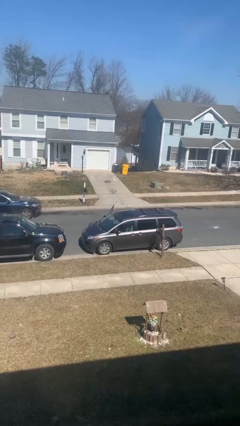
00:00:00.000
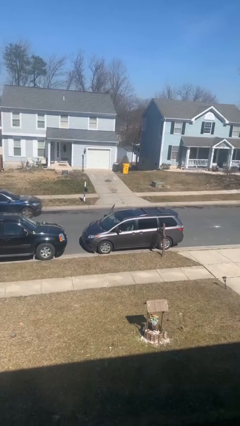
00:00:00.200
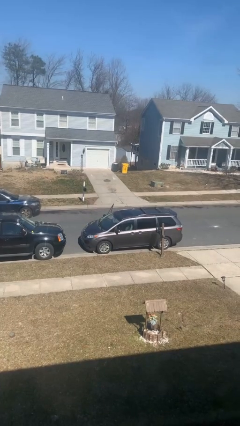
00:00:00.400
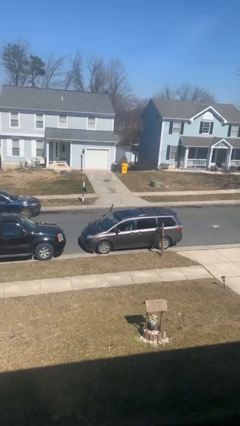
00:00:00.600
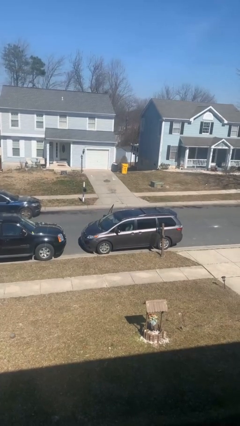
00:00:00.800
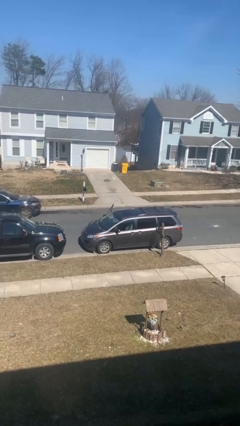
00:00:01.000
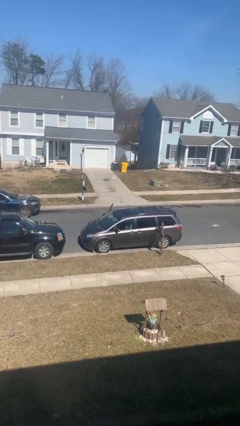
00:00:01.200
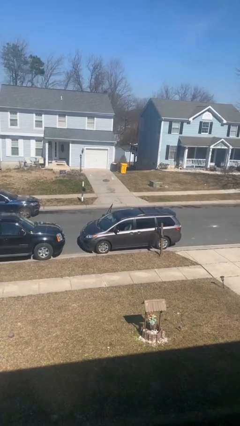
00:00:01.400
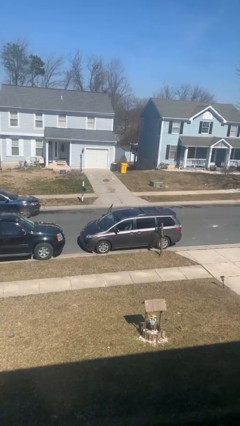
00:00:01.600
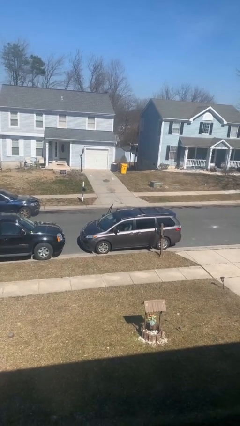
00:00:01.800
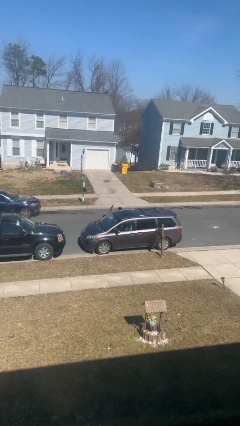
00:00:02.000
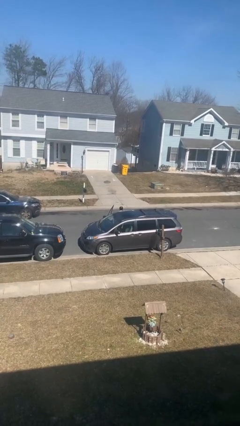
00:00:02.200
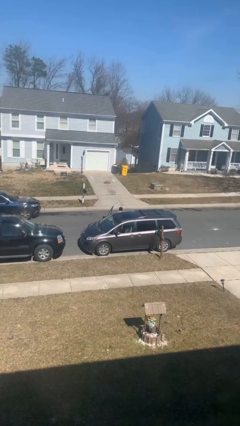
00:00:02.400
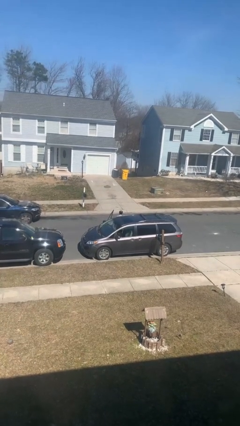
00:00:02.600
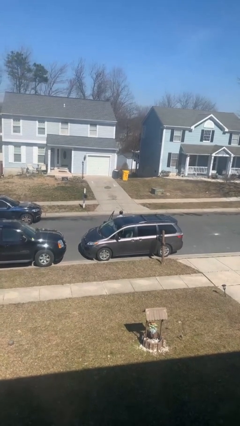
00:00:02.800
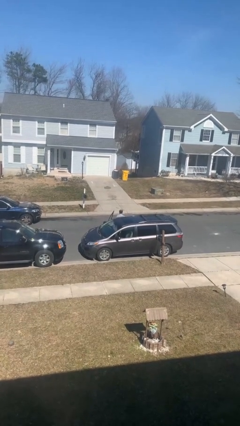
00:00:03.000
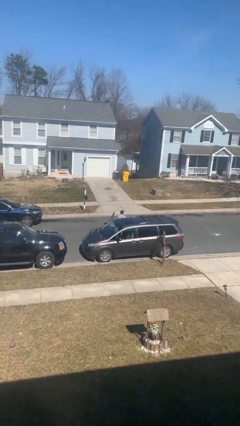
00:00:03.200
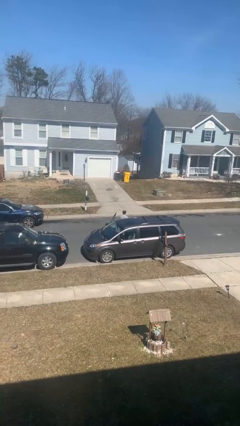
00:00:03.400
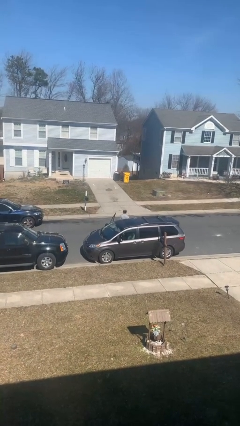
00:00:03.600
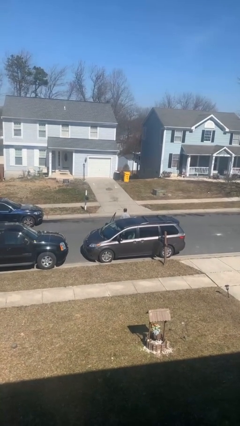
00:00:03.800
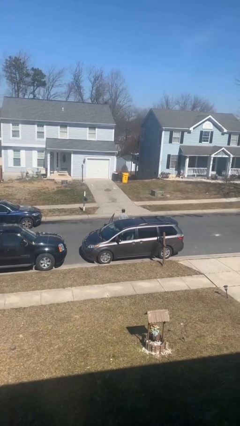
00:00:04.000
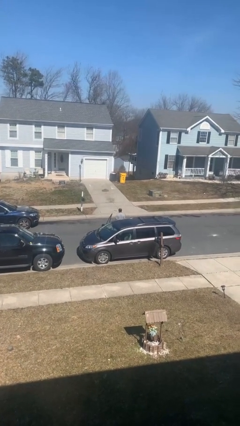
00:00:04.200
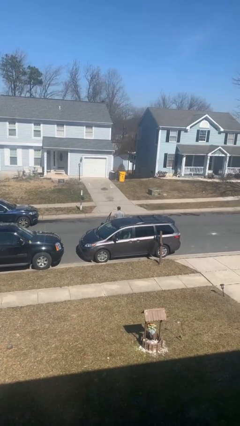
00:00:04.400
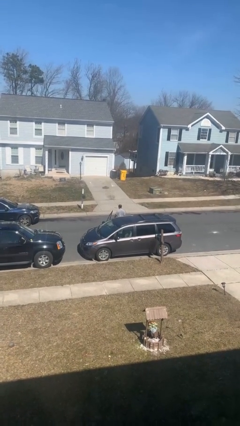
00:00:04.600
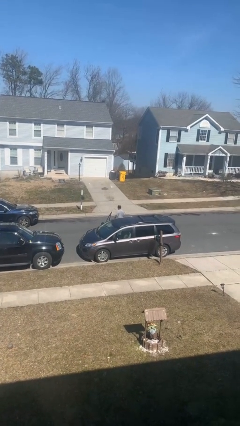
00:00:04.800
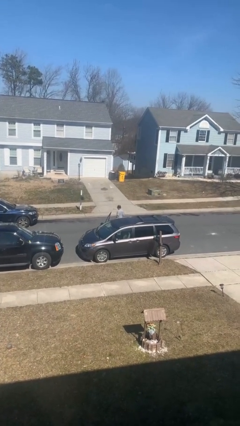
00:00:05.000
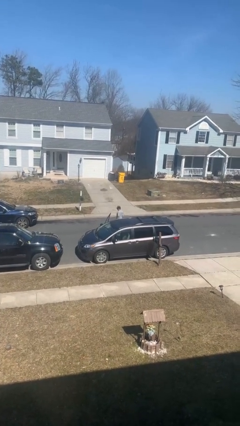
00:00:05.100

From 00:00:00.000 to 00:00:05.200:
person exits car

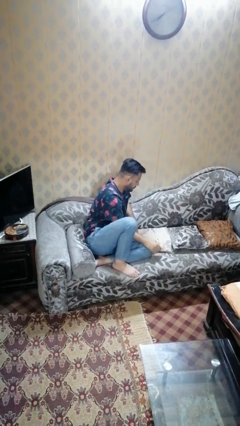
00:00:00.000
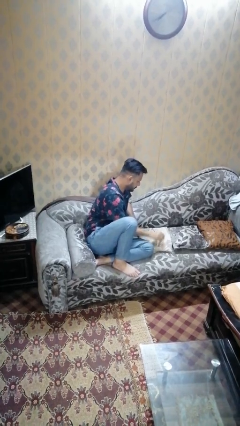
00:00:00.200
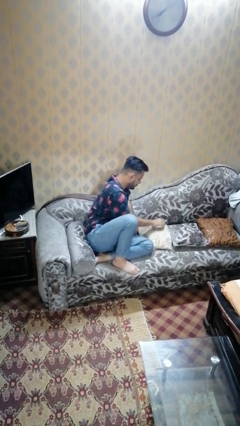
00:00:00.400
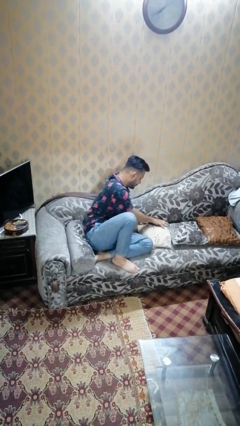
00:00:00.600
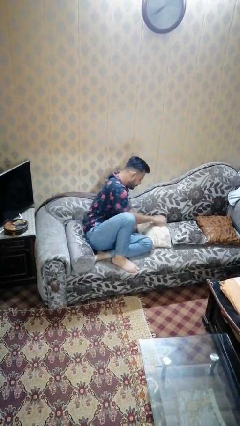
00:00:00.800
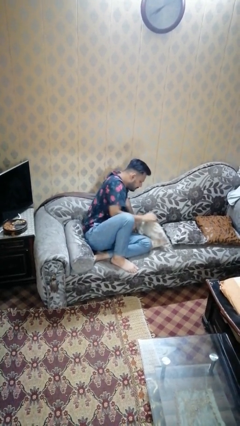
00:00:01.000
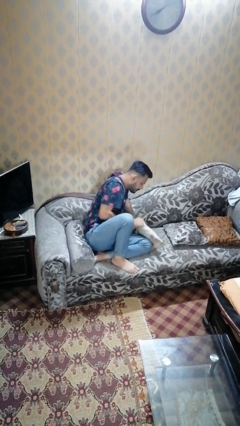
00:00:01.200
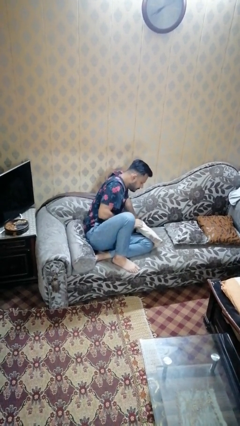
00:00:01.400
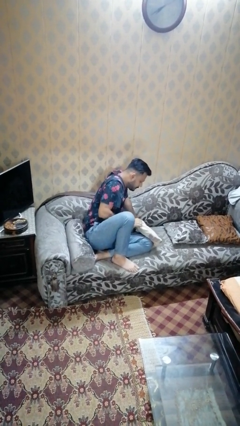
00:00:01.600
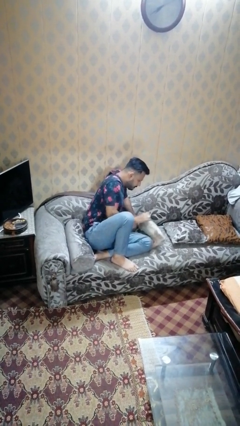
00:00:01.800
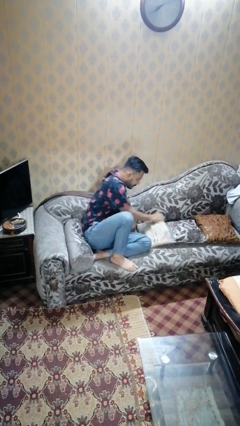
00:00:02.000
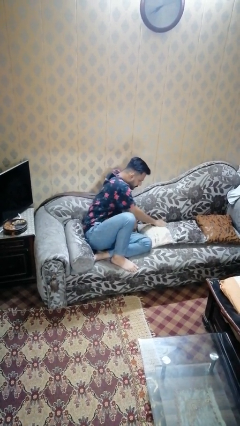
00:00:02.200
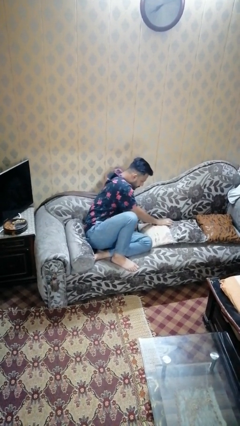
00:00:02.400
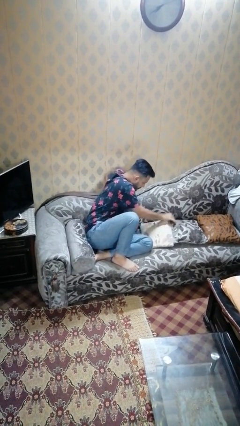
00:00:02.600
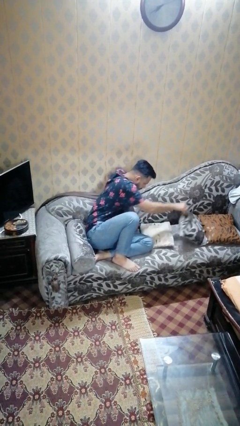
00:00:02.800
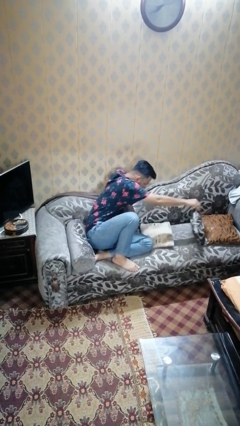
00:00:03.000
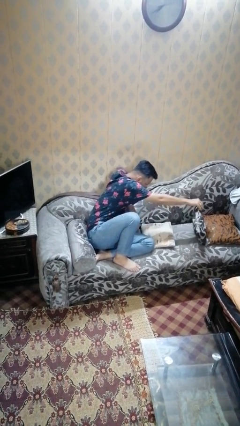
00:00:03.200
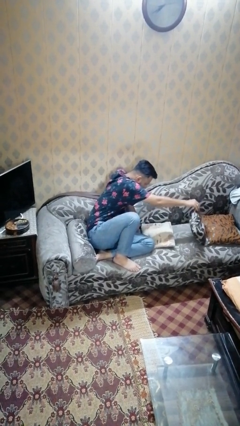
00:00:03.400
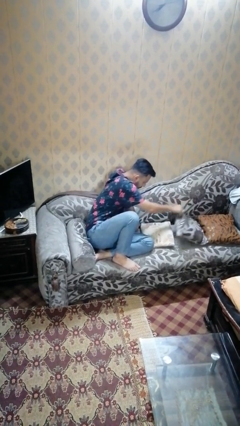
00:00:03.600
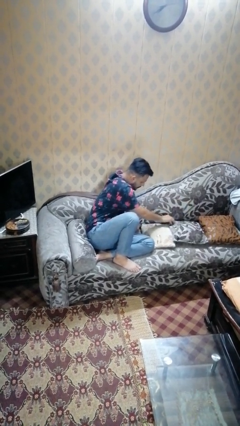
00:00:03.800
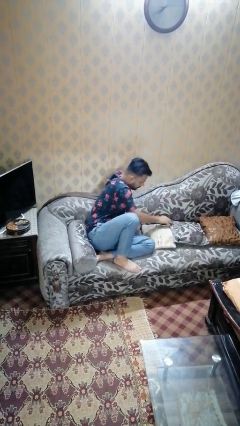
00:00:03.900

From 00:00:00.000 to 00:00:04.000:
person searches in couch

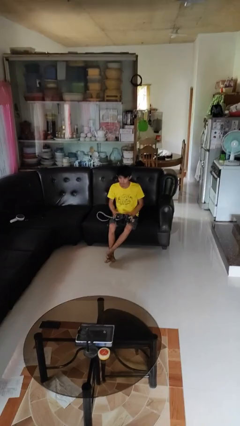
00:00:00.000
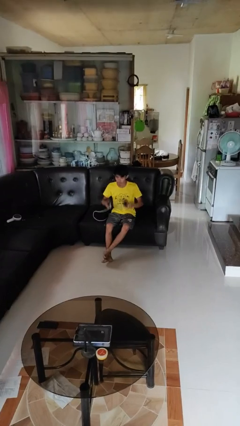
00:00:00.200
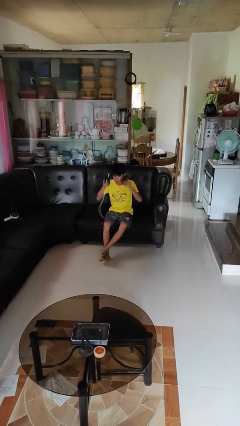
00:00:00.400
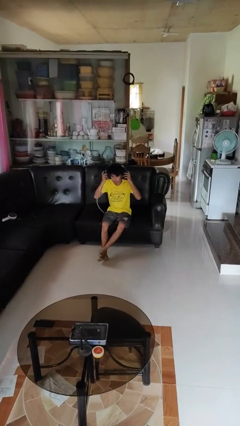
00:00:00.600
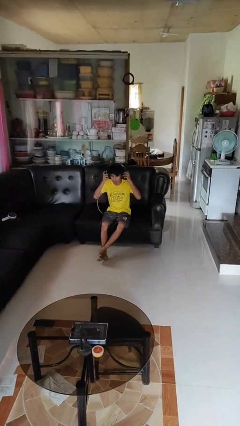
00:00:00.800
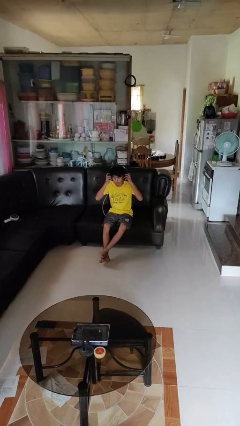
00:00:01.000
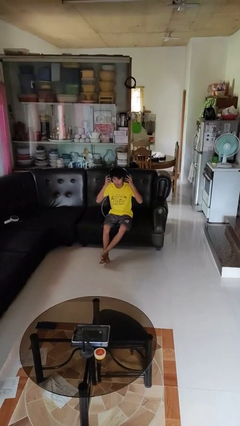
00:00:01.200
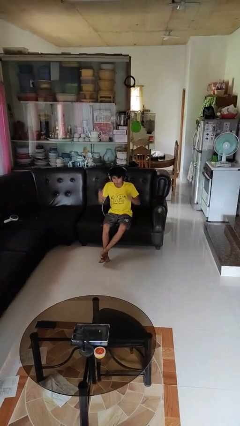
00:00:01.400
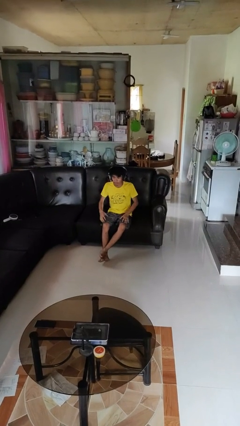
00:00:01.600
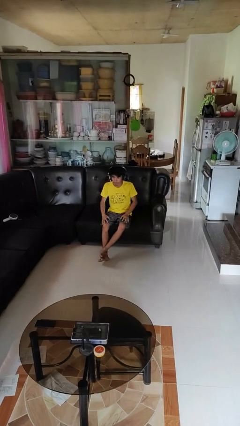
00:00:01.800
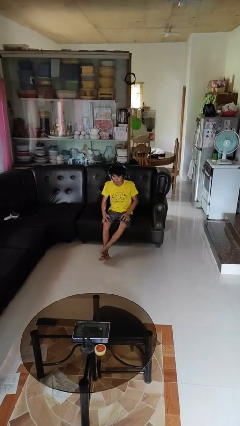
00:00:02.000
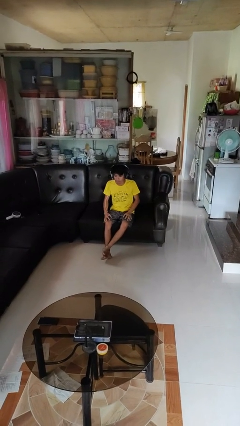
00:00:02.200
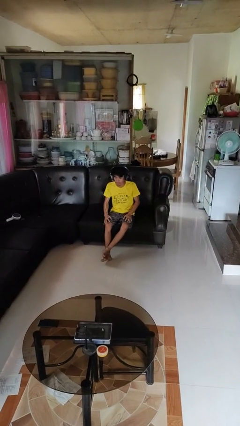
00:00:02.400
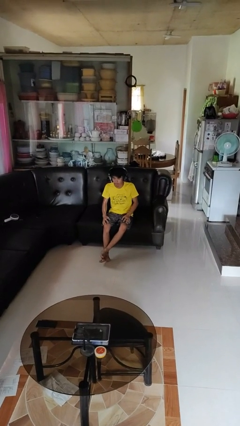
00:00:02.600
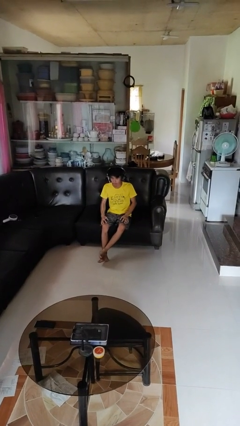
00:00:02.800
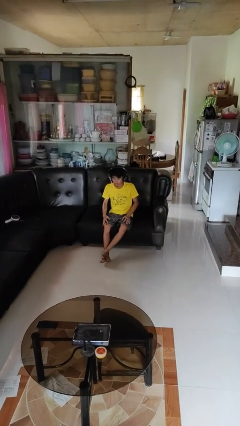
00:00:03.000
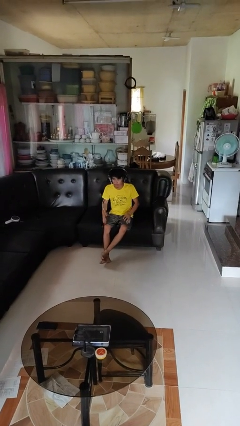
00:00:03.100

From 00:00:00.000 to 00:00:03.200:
person puts on headphones

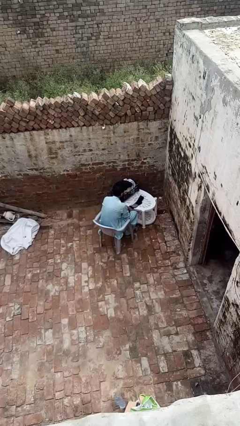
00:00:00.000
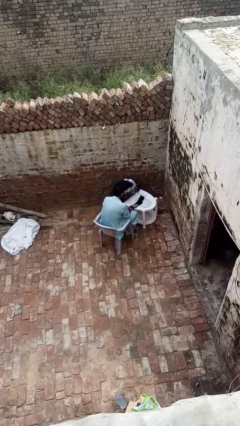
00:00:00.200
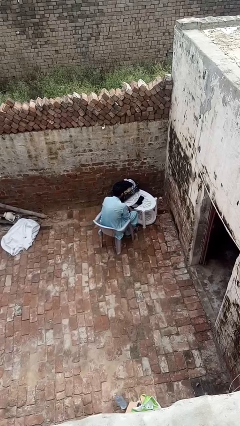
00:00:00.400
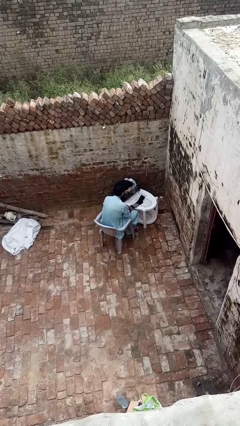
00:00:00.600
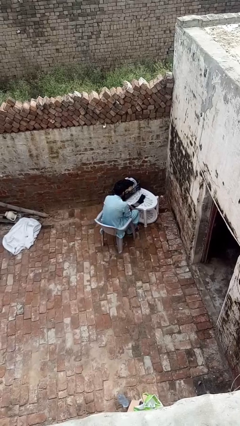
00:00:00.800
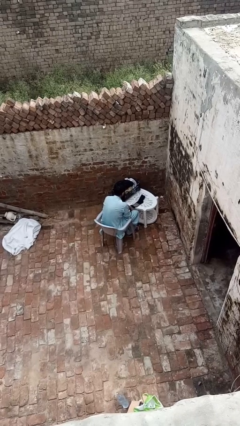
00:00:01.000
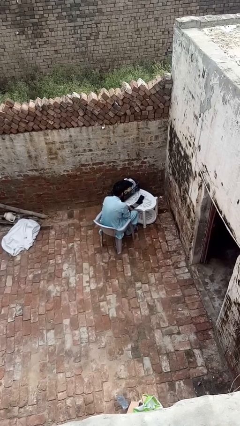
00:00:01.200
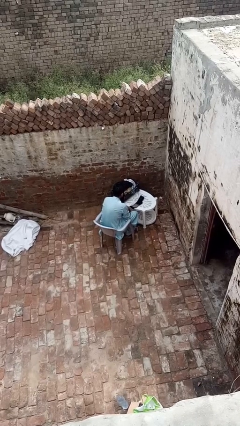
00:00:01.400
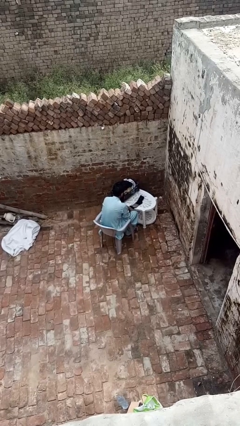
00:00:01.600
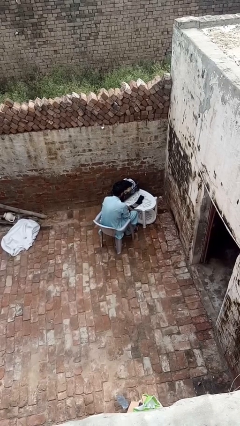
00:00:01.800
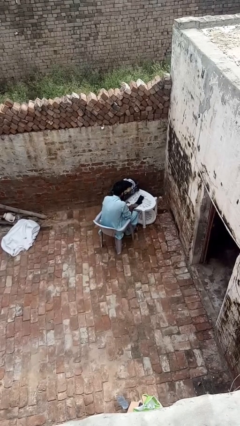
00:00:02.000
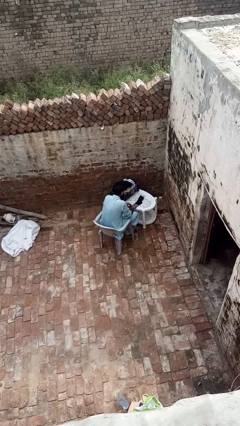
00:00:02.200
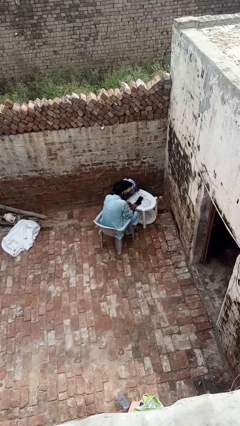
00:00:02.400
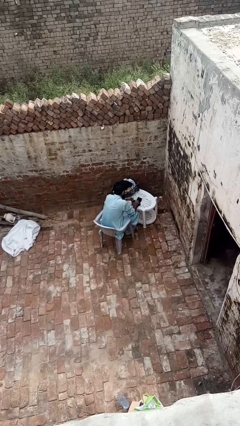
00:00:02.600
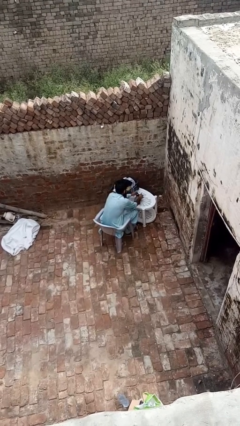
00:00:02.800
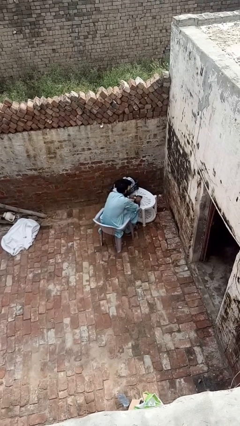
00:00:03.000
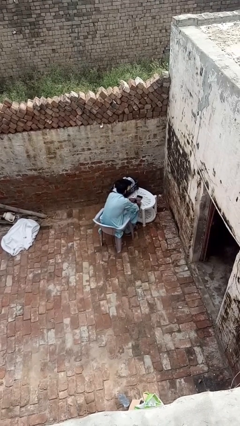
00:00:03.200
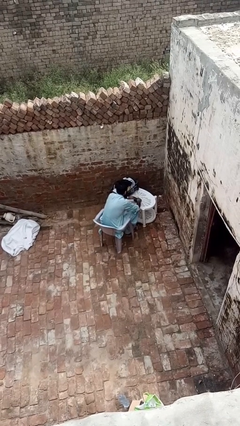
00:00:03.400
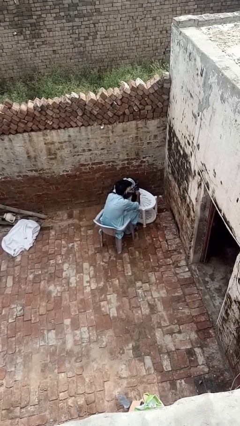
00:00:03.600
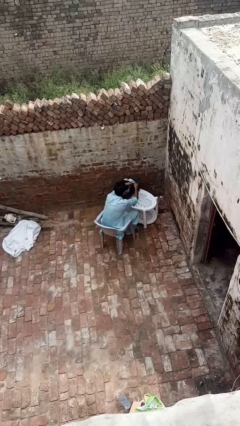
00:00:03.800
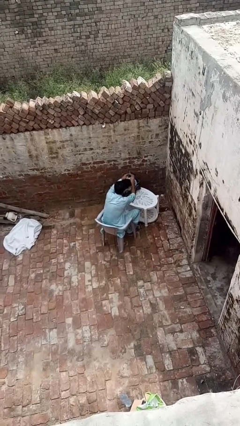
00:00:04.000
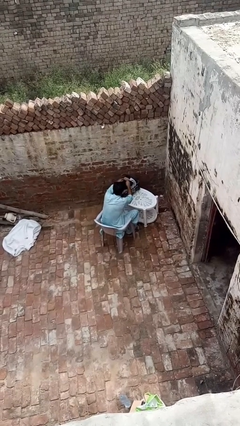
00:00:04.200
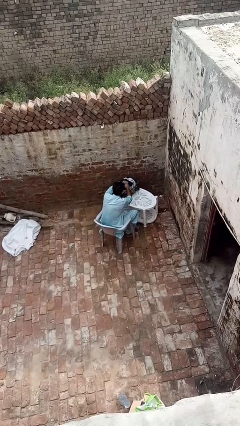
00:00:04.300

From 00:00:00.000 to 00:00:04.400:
person folds socks

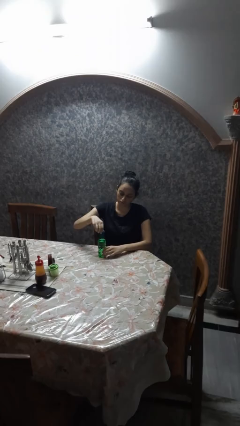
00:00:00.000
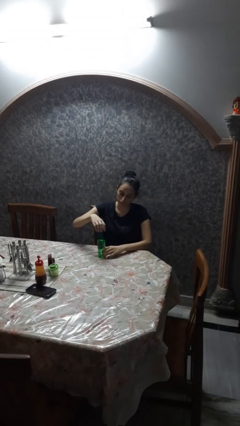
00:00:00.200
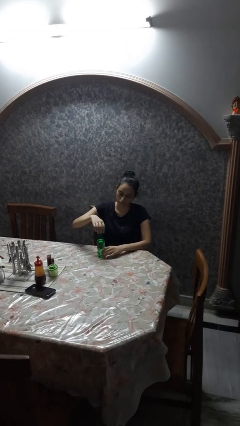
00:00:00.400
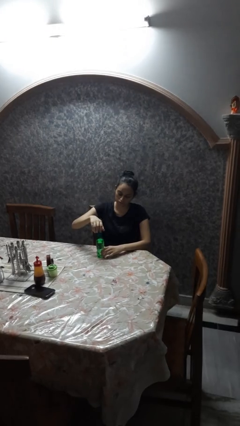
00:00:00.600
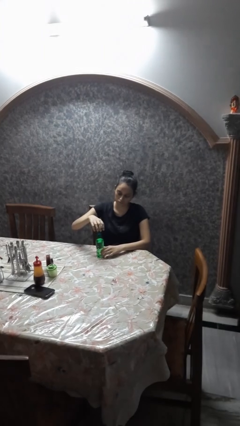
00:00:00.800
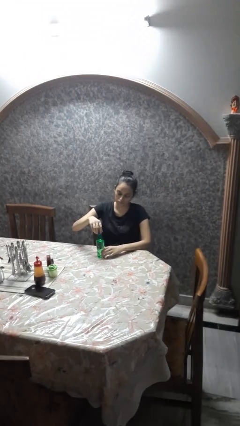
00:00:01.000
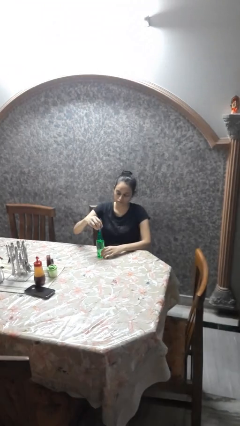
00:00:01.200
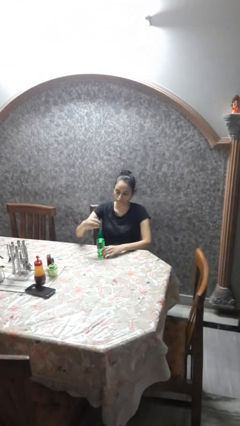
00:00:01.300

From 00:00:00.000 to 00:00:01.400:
person unscrews lid from bottle
